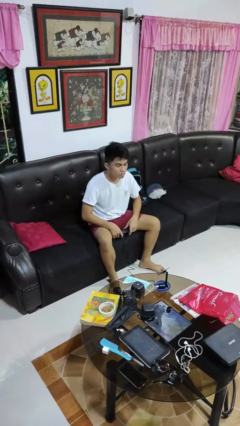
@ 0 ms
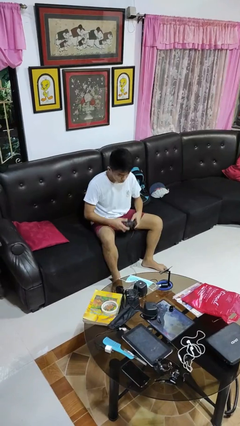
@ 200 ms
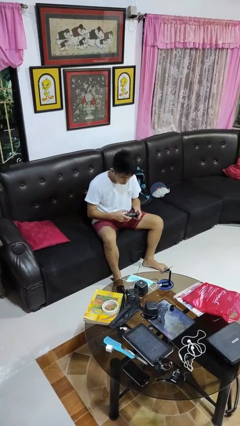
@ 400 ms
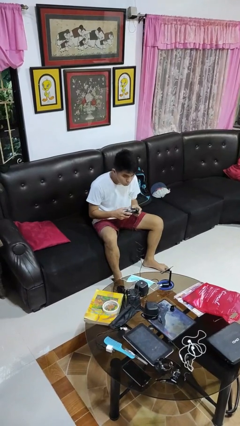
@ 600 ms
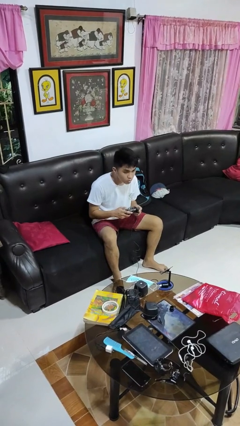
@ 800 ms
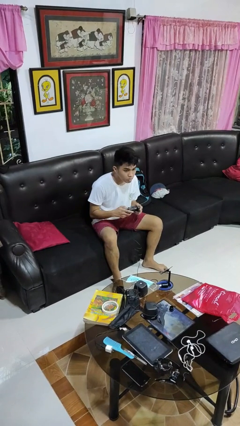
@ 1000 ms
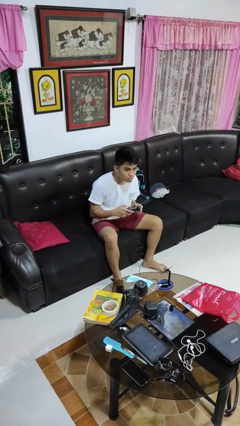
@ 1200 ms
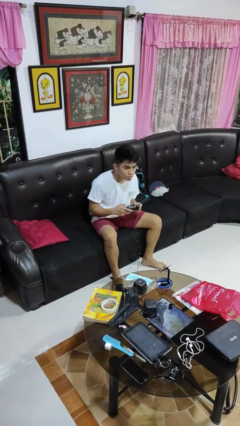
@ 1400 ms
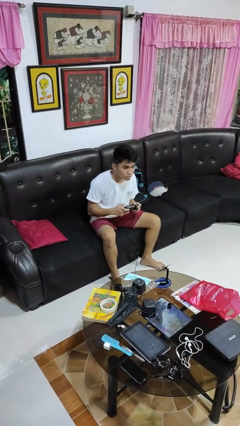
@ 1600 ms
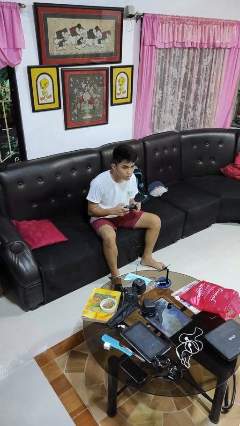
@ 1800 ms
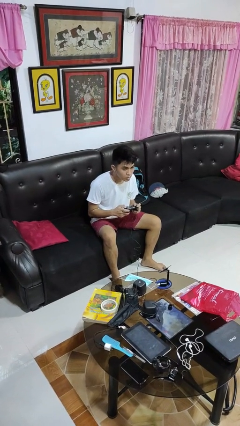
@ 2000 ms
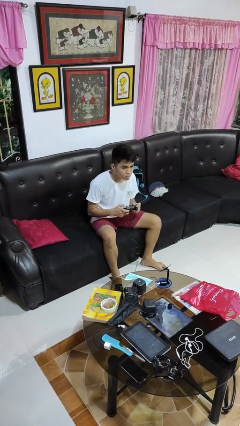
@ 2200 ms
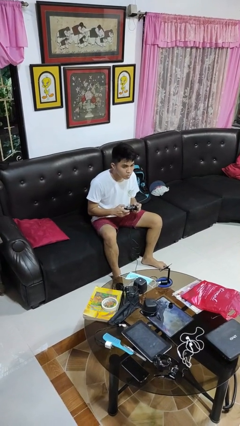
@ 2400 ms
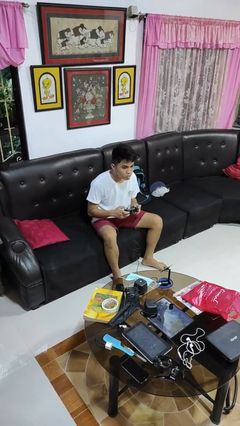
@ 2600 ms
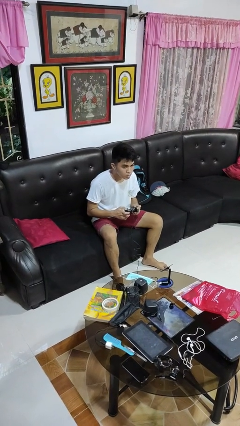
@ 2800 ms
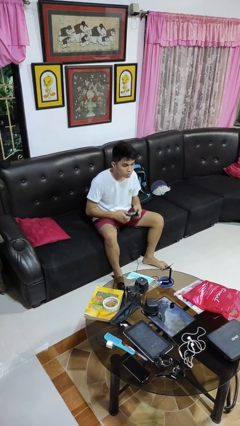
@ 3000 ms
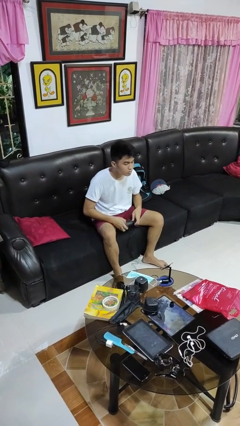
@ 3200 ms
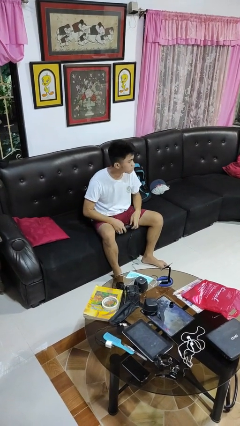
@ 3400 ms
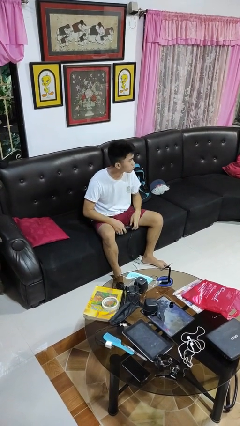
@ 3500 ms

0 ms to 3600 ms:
person interacts with handheld game

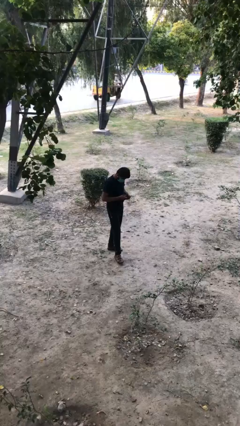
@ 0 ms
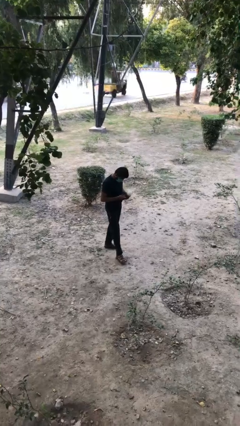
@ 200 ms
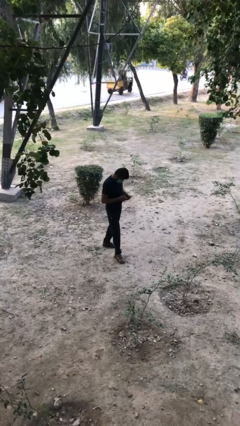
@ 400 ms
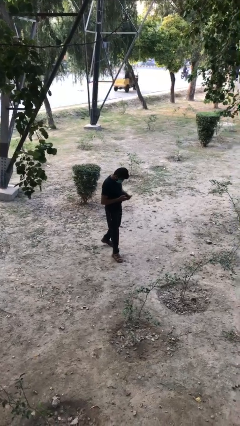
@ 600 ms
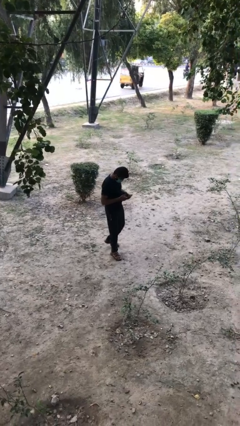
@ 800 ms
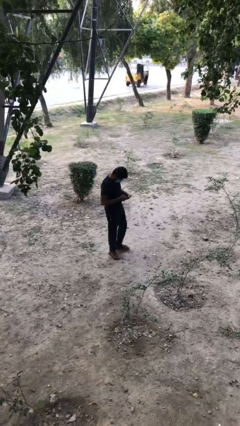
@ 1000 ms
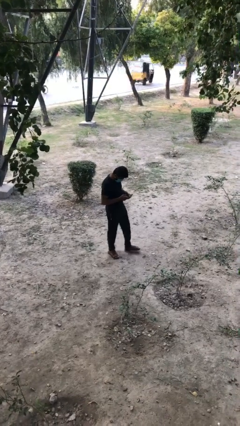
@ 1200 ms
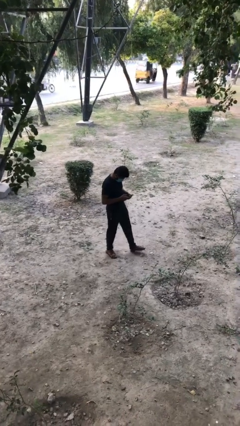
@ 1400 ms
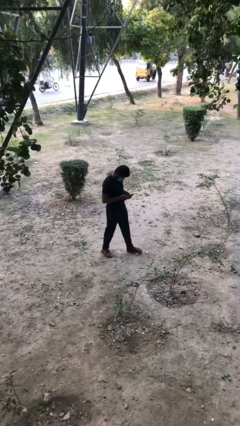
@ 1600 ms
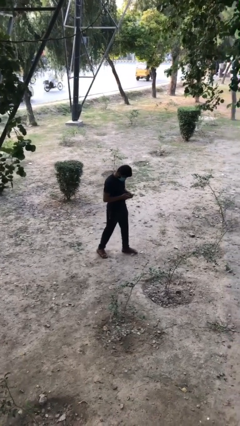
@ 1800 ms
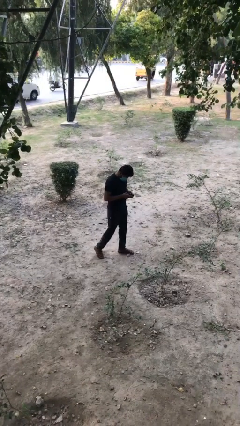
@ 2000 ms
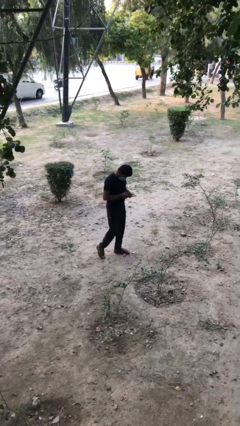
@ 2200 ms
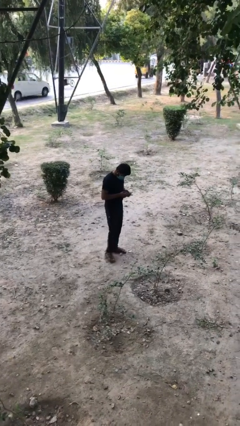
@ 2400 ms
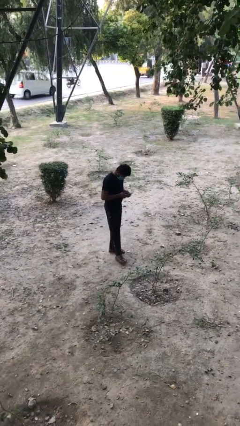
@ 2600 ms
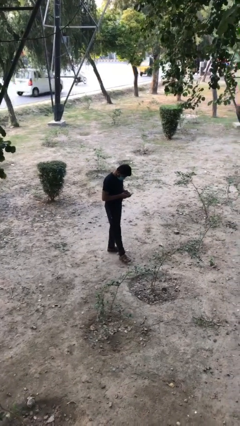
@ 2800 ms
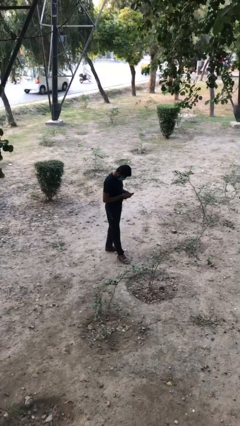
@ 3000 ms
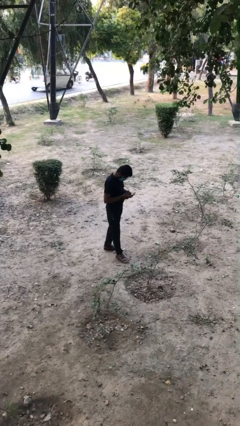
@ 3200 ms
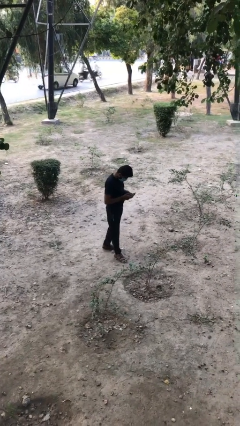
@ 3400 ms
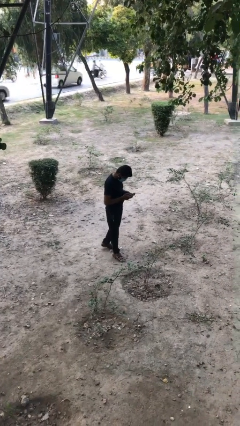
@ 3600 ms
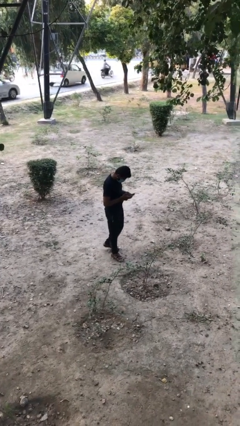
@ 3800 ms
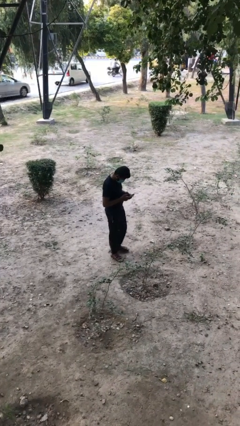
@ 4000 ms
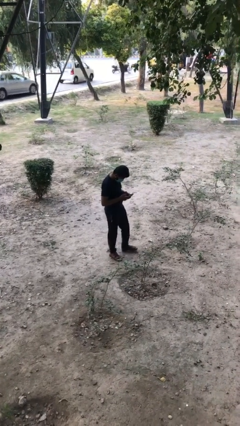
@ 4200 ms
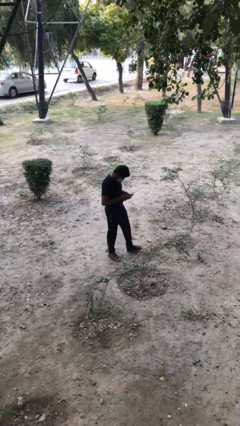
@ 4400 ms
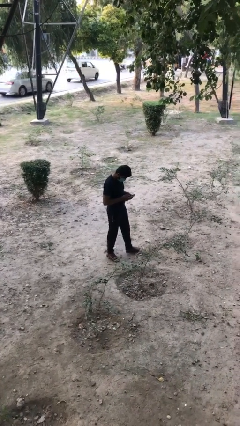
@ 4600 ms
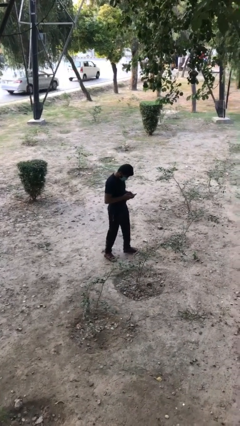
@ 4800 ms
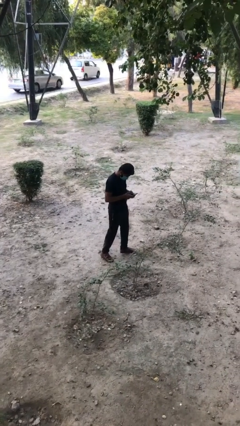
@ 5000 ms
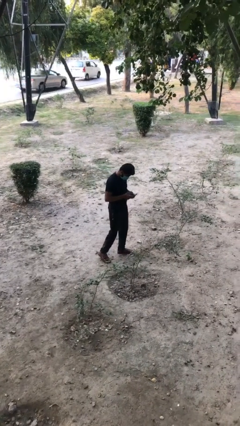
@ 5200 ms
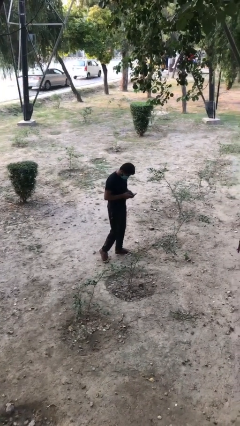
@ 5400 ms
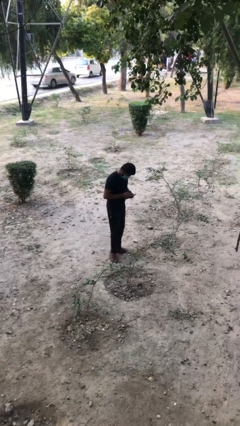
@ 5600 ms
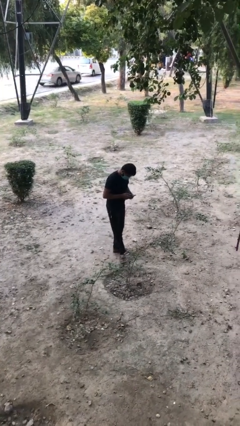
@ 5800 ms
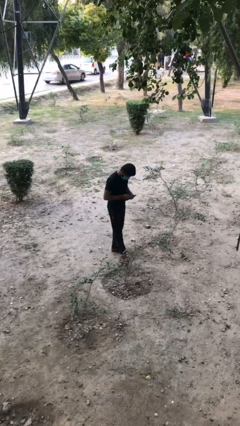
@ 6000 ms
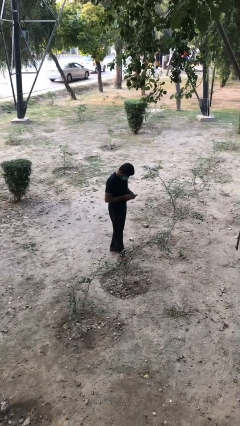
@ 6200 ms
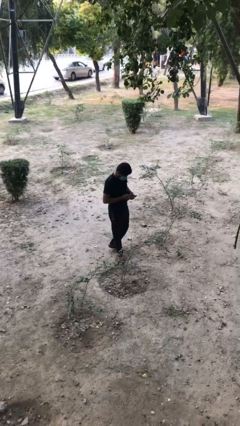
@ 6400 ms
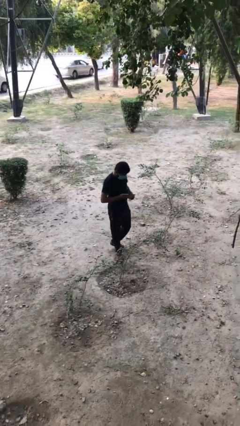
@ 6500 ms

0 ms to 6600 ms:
person texts on phone

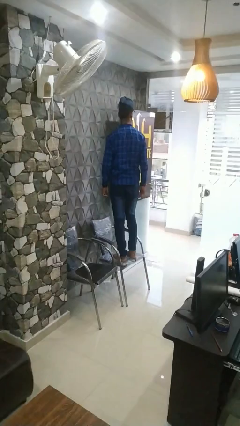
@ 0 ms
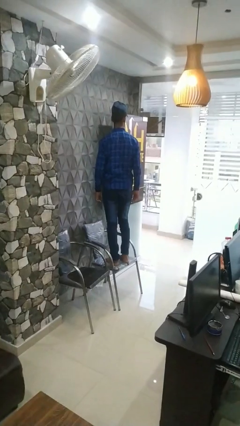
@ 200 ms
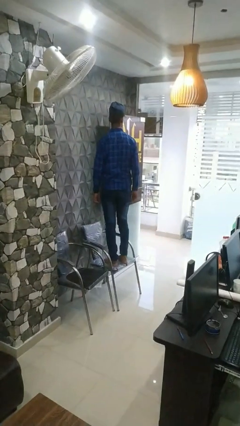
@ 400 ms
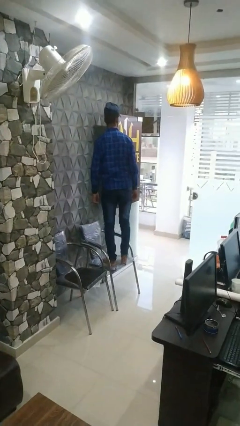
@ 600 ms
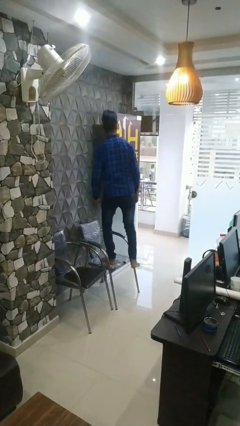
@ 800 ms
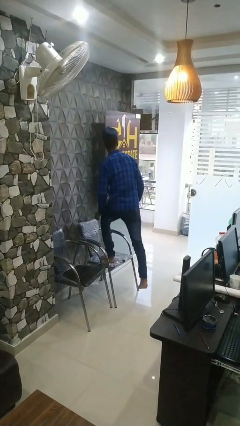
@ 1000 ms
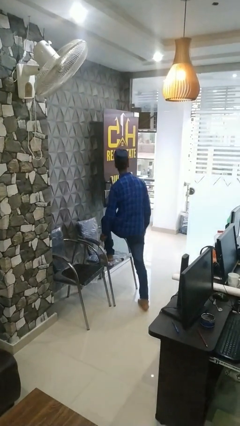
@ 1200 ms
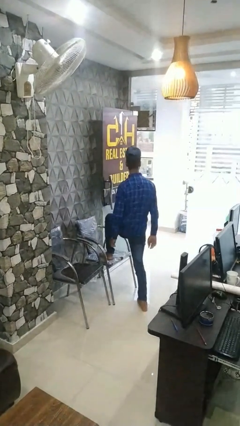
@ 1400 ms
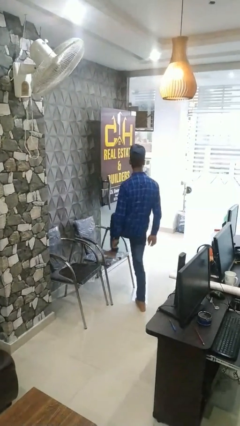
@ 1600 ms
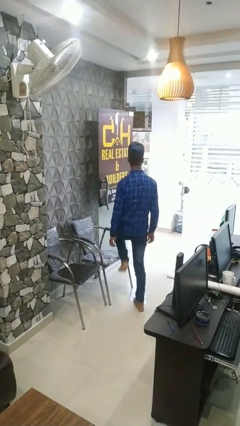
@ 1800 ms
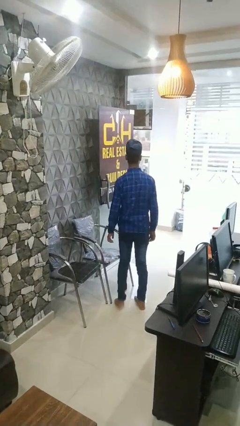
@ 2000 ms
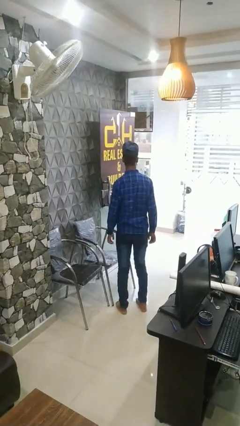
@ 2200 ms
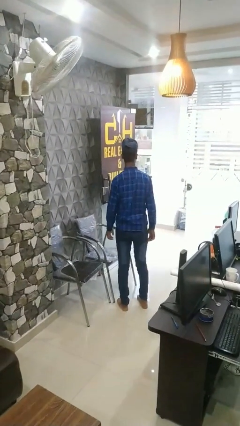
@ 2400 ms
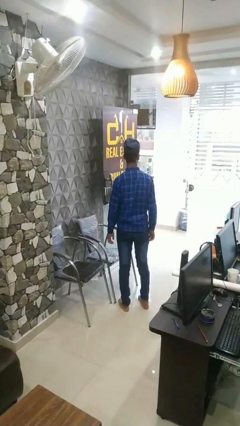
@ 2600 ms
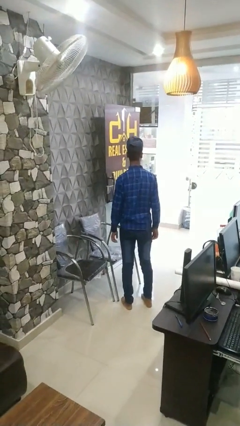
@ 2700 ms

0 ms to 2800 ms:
person climbs off chair

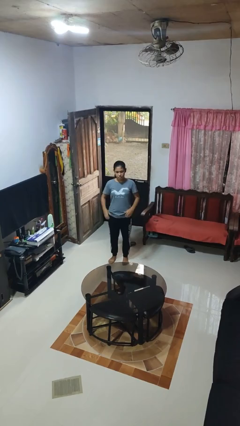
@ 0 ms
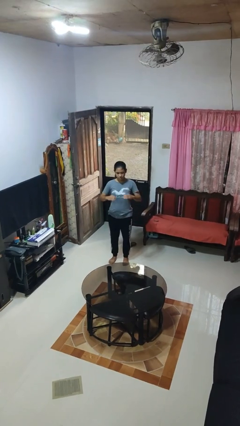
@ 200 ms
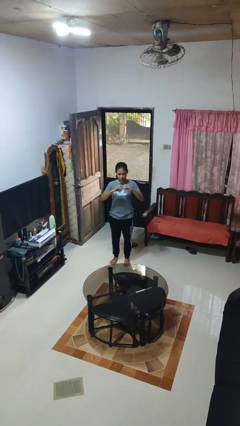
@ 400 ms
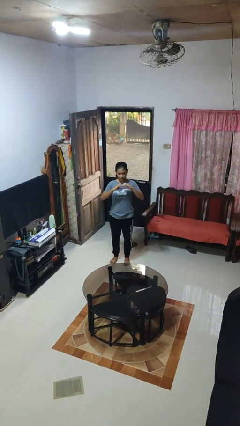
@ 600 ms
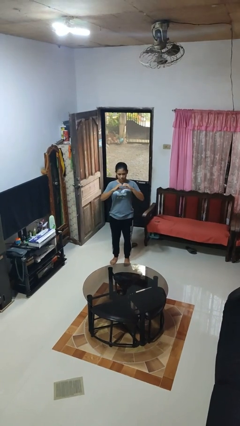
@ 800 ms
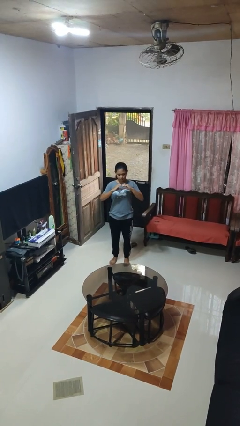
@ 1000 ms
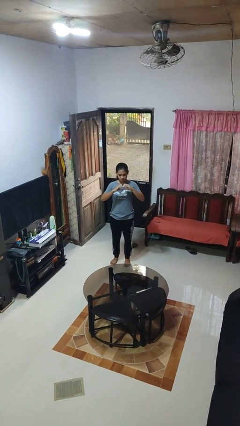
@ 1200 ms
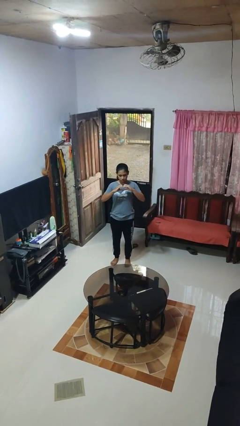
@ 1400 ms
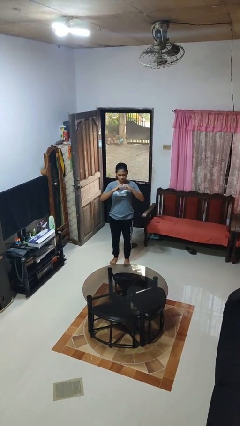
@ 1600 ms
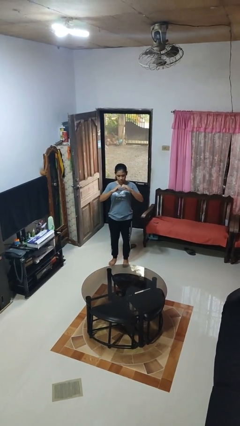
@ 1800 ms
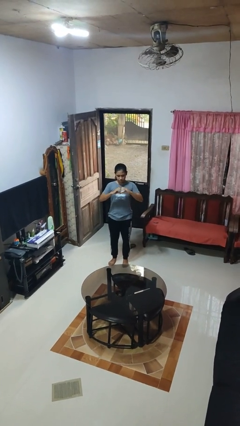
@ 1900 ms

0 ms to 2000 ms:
person gestures heart

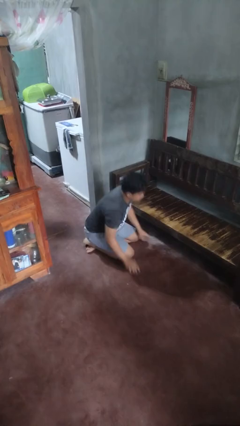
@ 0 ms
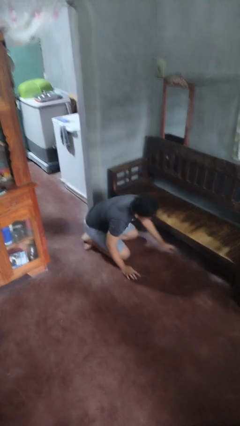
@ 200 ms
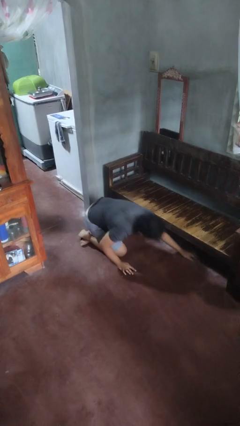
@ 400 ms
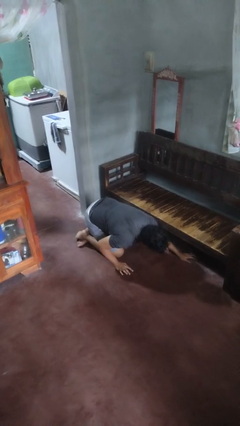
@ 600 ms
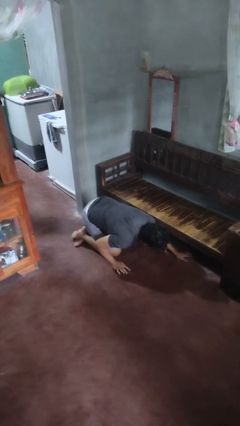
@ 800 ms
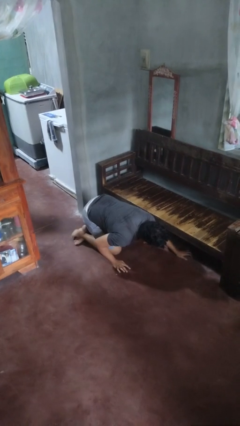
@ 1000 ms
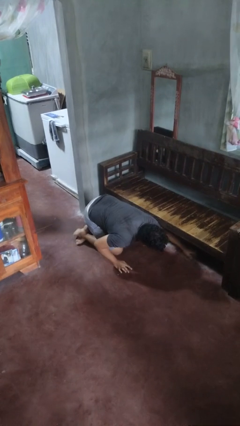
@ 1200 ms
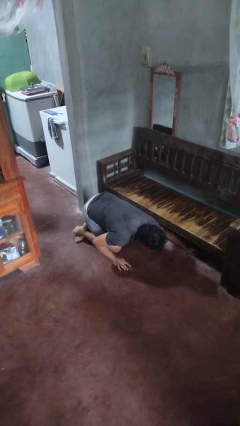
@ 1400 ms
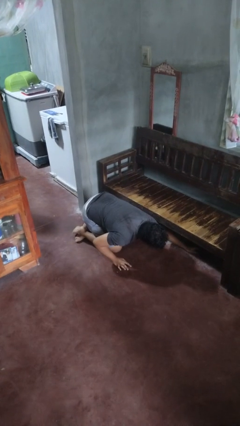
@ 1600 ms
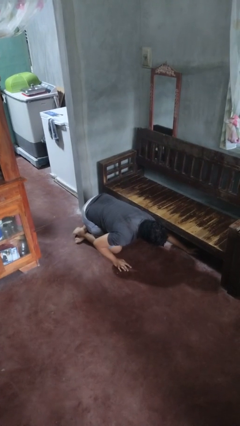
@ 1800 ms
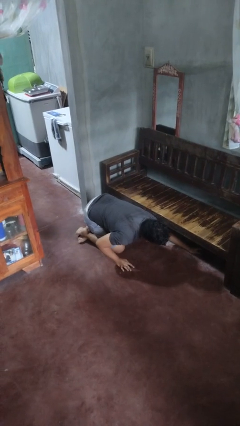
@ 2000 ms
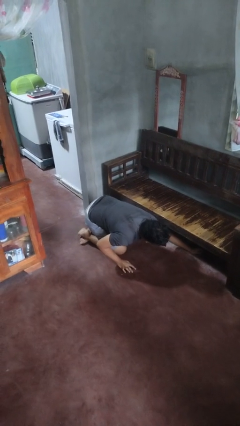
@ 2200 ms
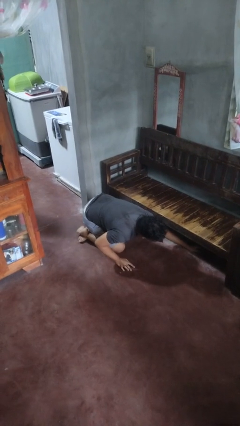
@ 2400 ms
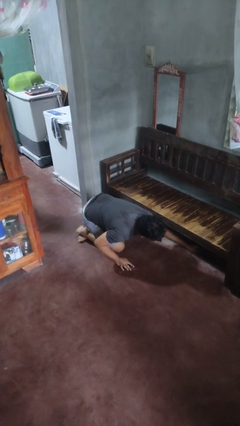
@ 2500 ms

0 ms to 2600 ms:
person searches under couch
